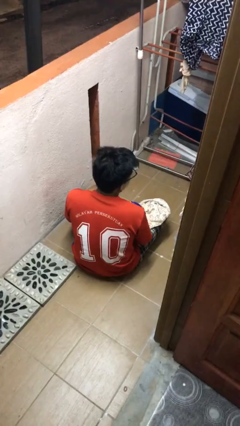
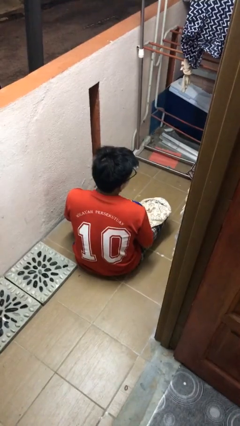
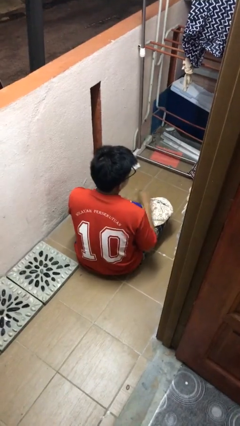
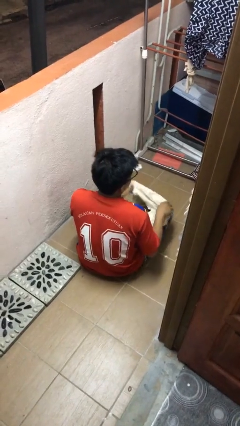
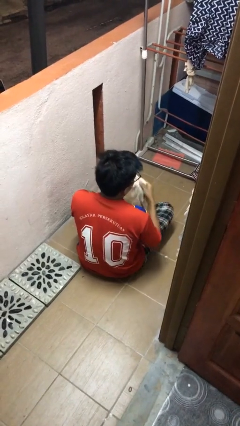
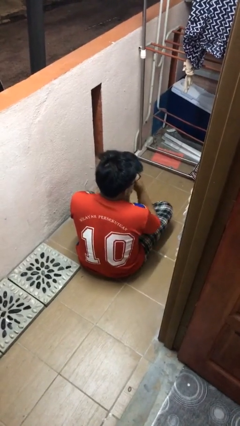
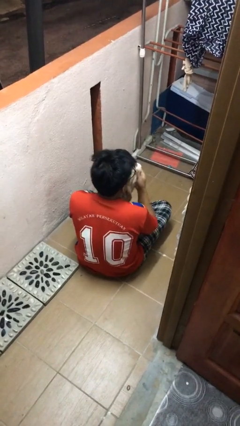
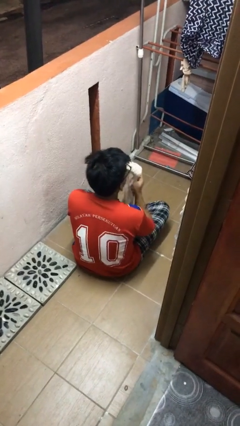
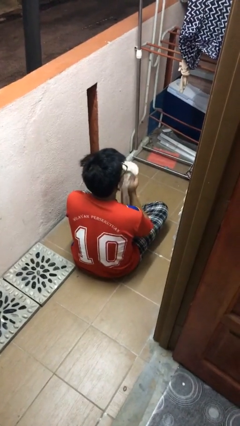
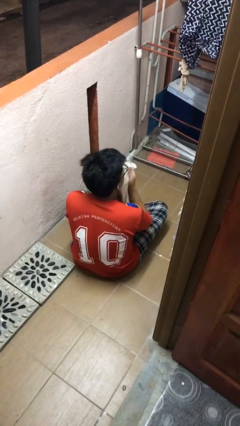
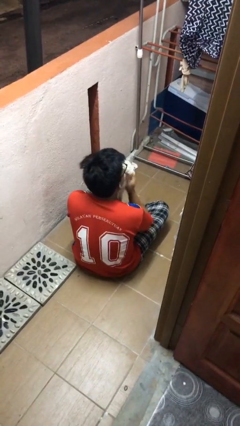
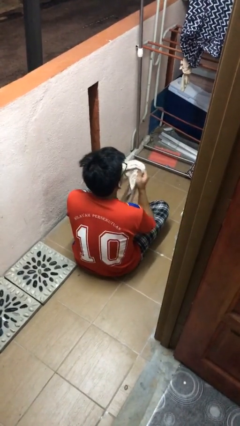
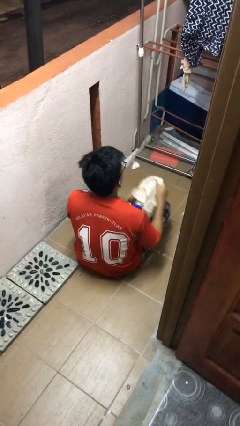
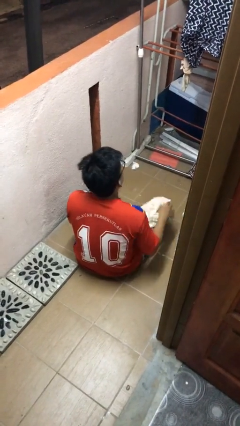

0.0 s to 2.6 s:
person wipes mouth with napkin

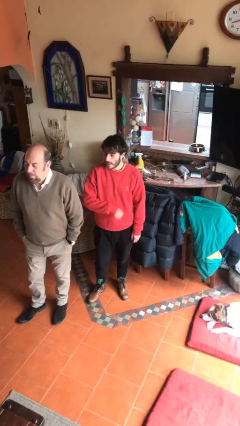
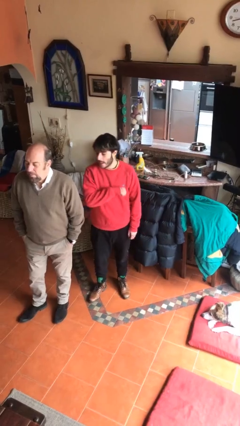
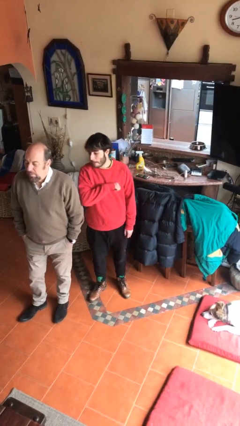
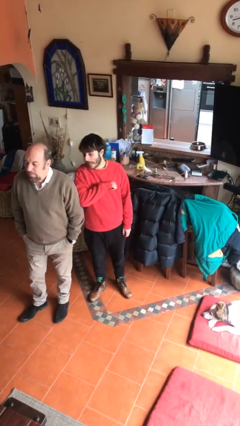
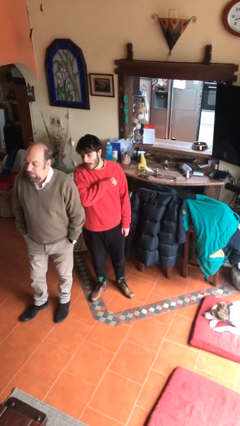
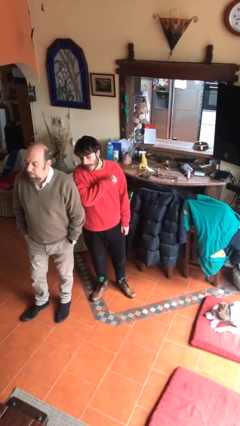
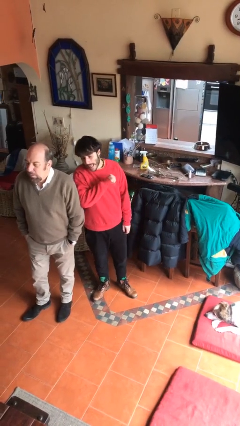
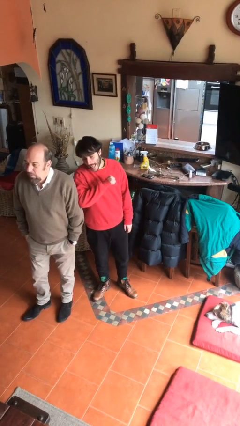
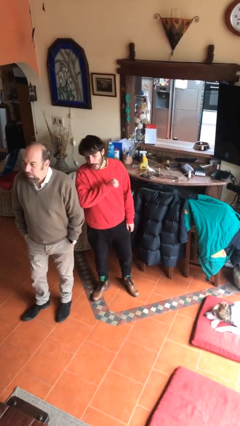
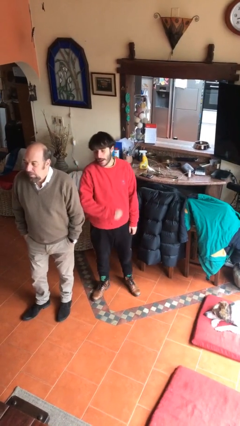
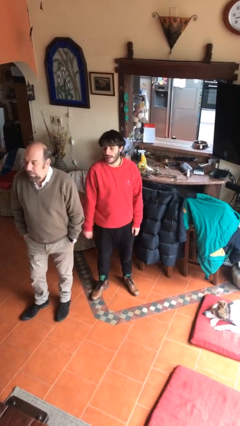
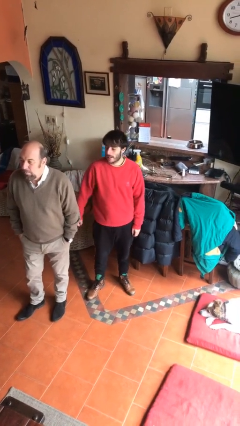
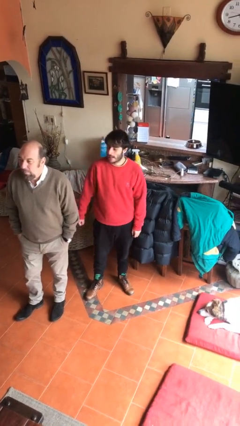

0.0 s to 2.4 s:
person nudges person with elbow

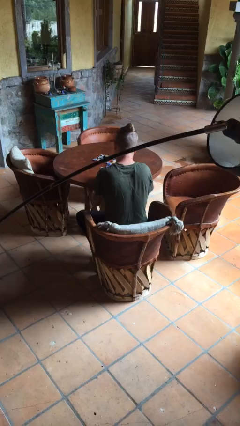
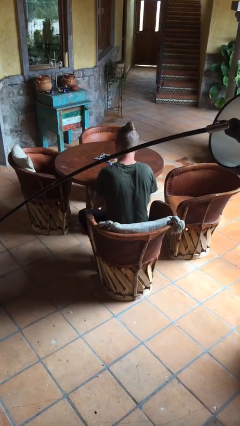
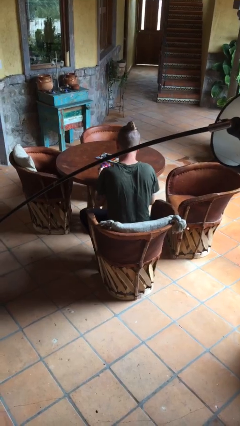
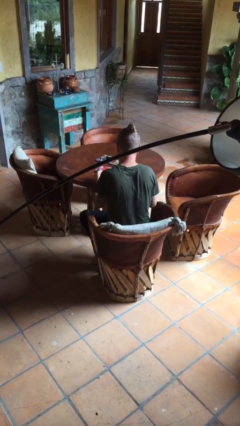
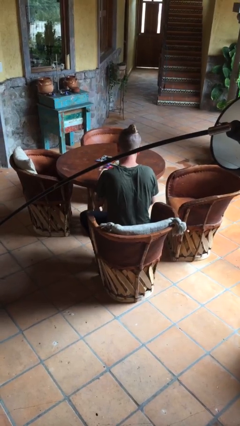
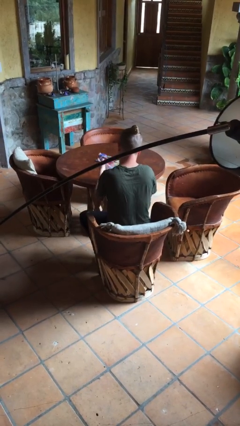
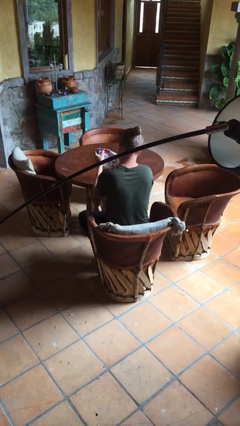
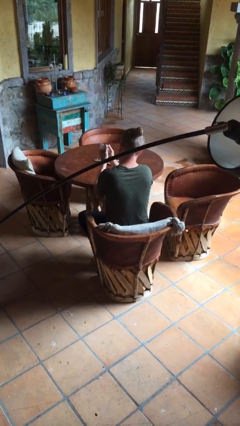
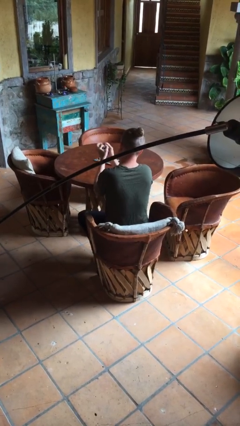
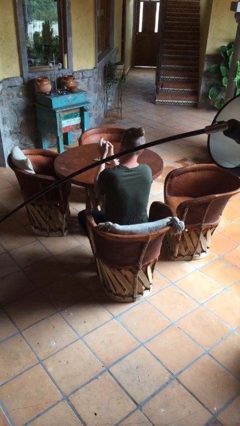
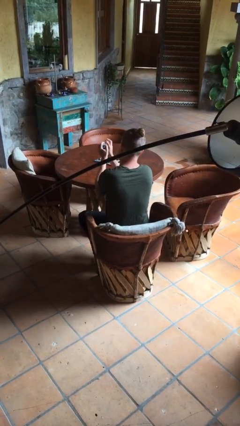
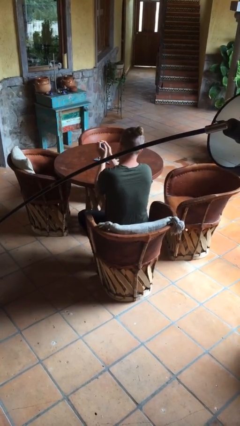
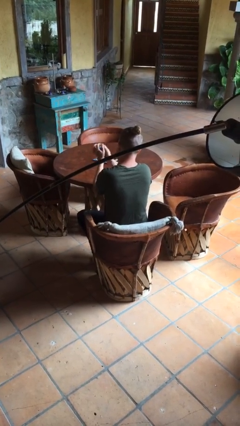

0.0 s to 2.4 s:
person crumples paper

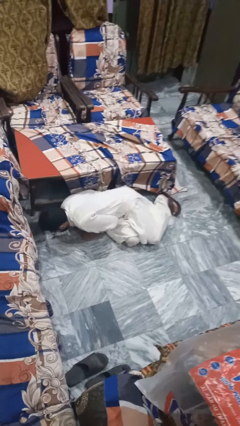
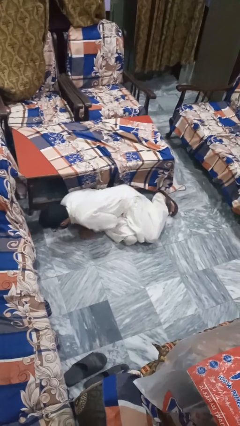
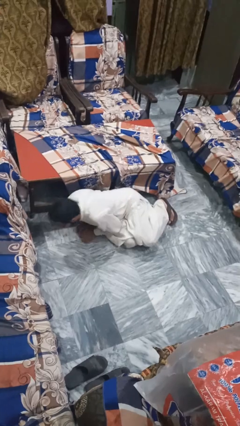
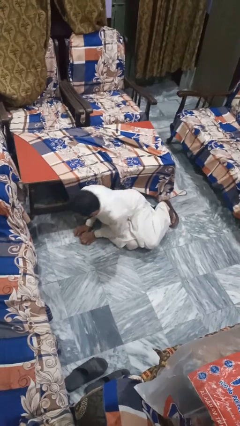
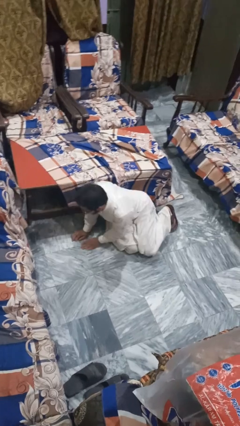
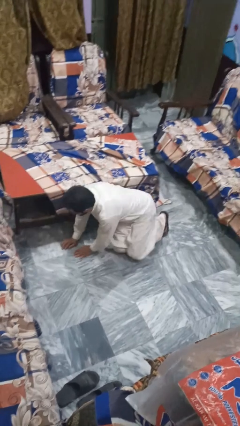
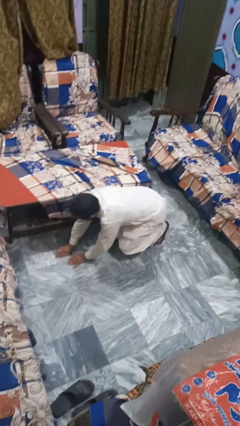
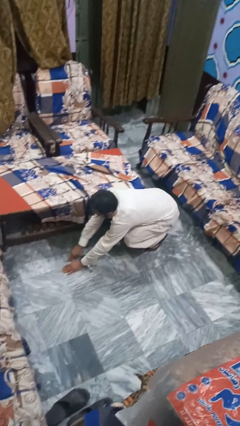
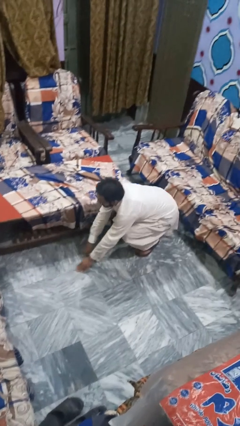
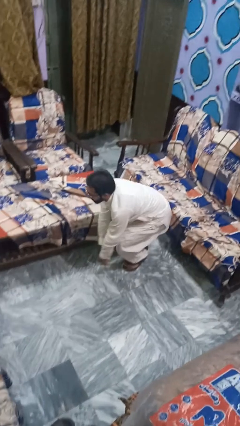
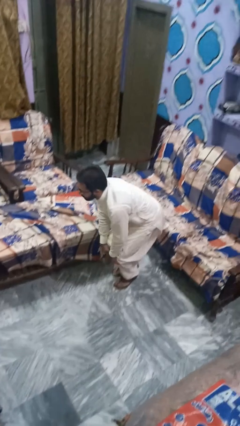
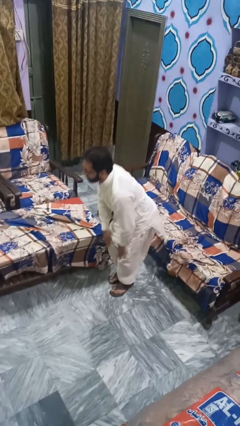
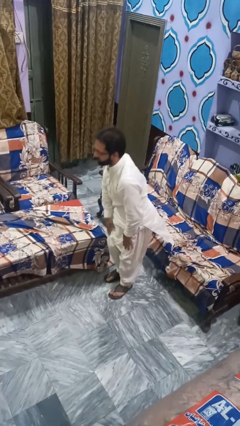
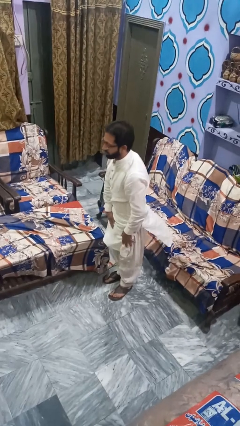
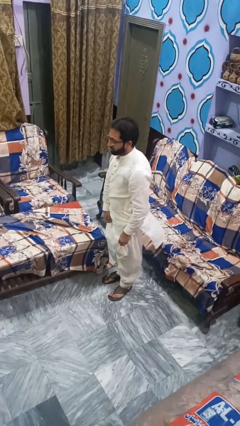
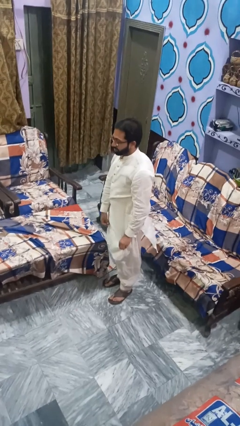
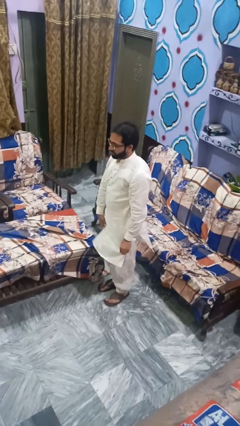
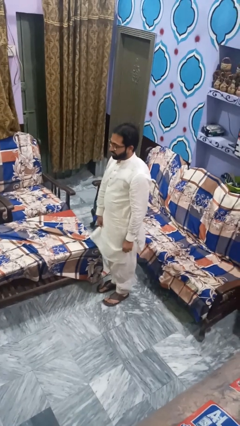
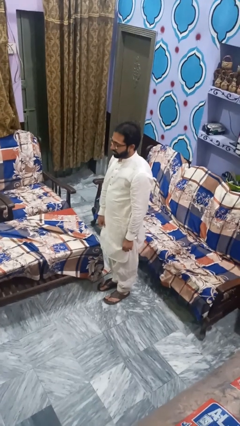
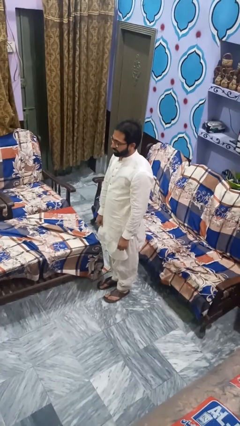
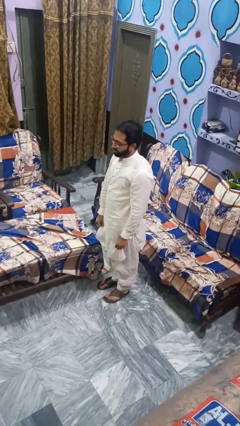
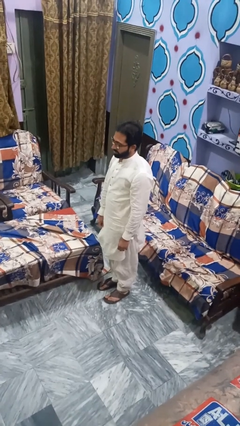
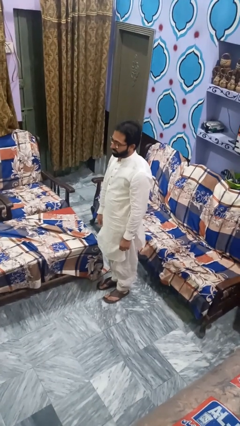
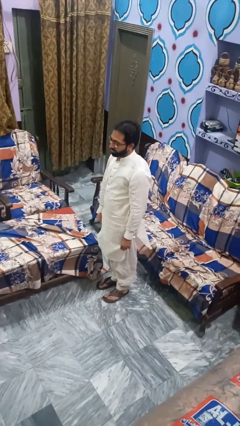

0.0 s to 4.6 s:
person stands up from floor

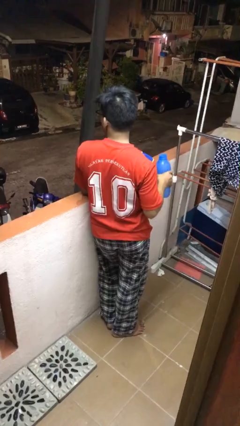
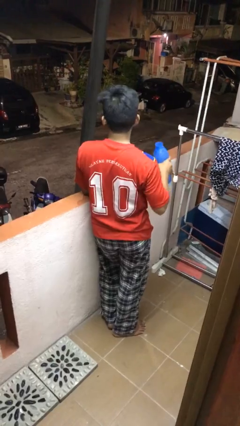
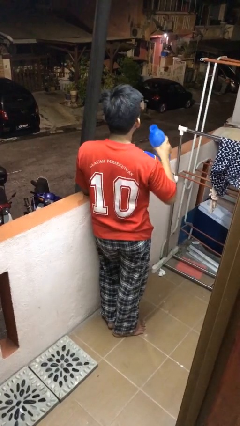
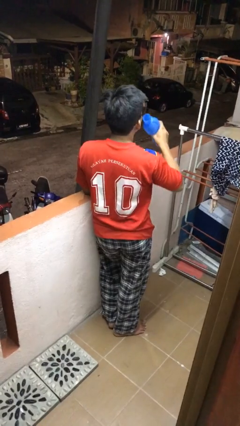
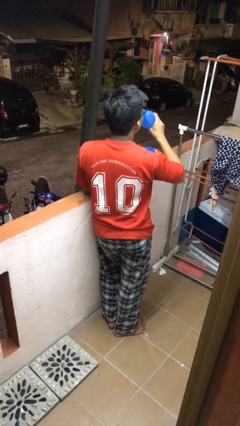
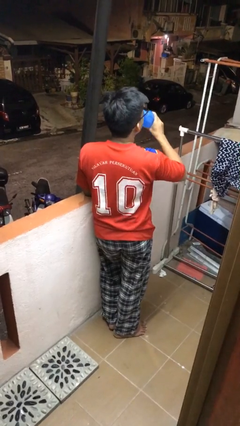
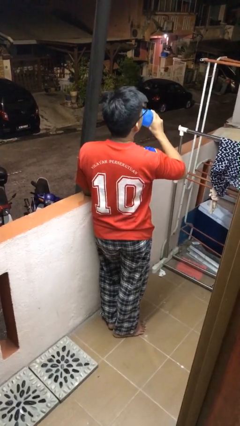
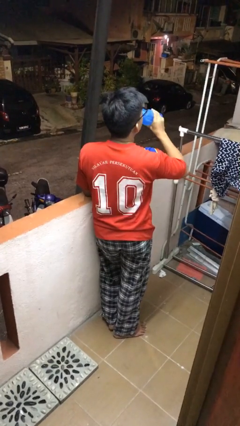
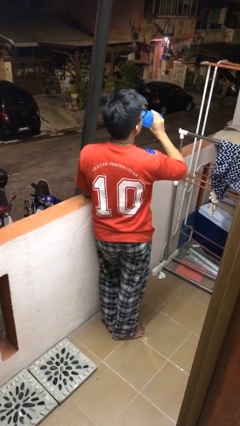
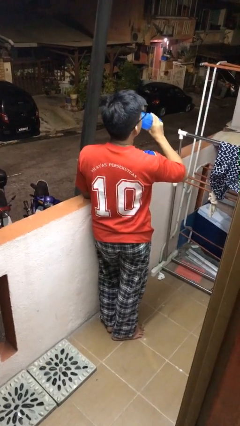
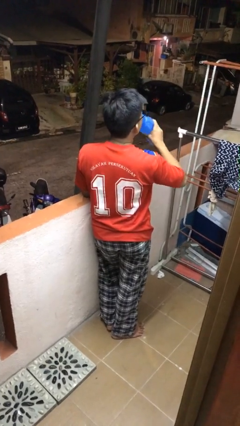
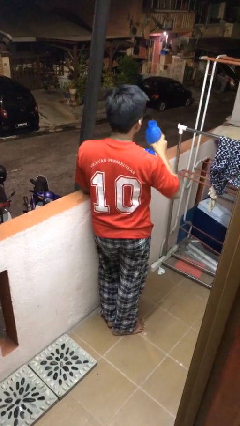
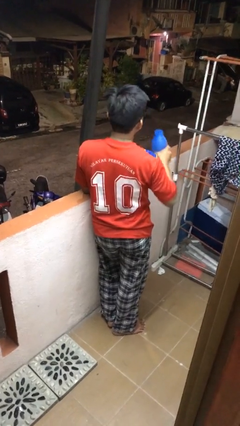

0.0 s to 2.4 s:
person drinks from bottle

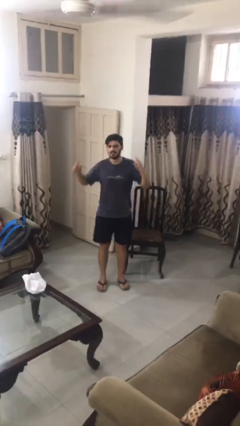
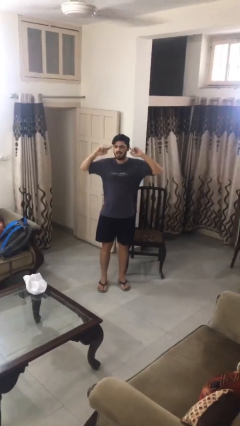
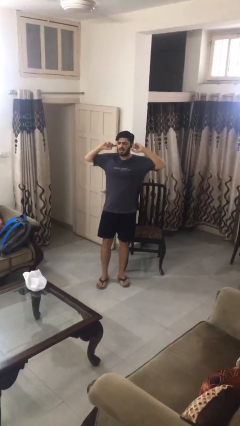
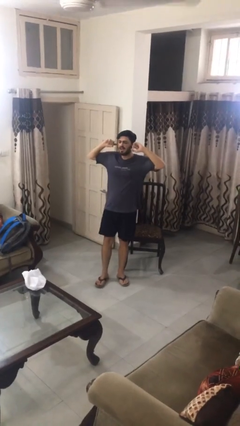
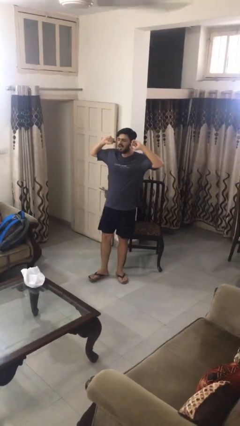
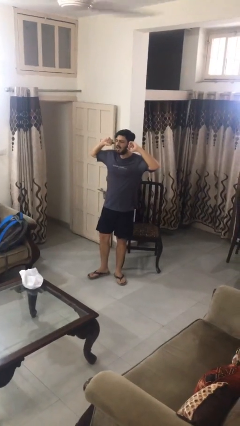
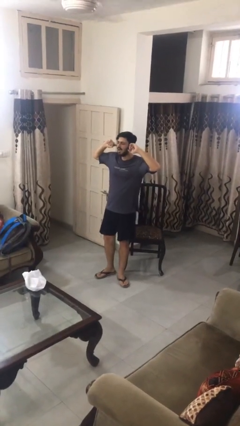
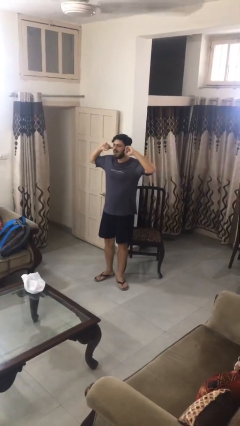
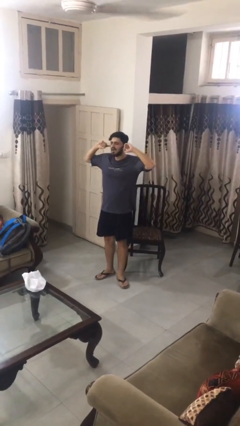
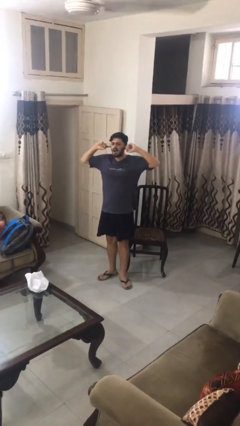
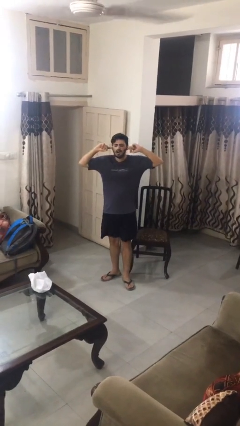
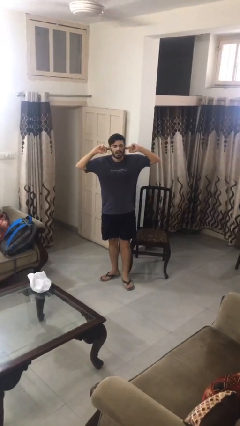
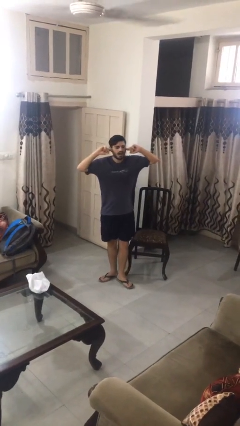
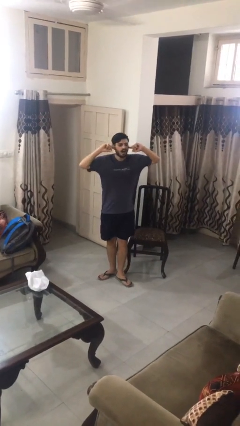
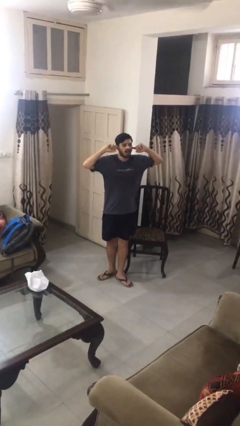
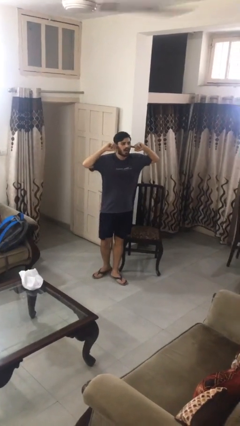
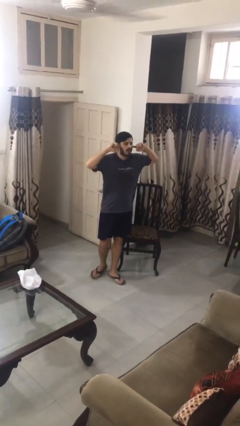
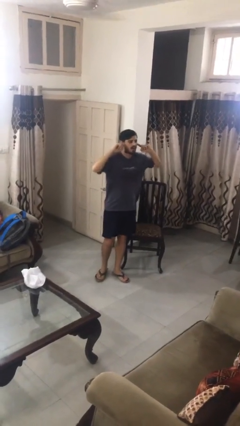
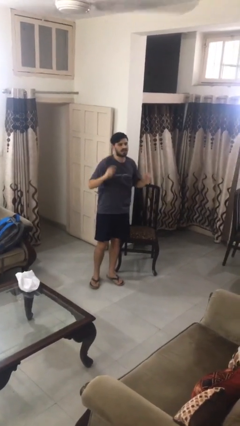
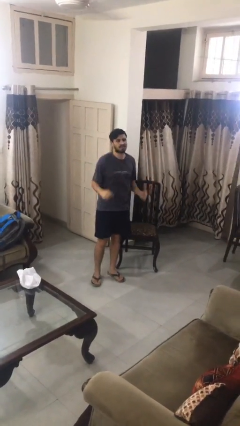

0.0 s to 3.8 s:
person puts fingers in ear
